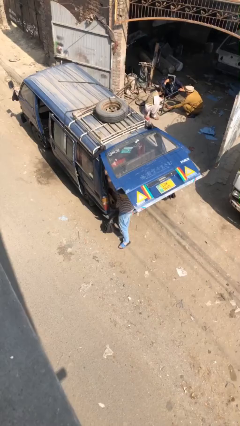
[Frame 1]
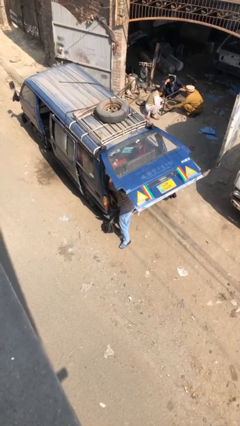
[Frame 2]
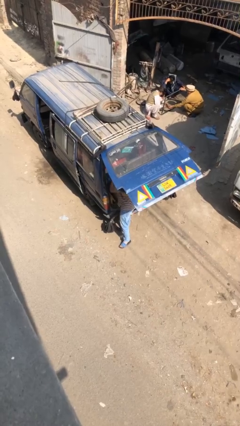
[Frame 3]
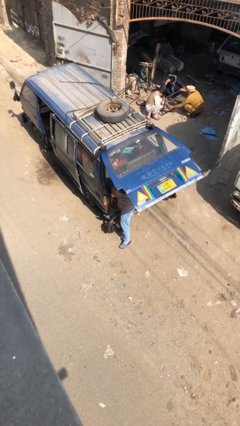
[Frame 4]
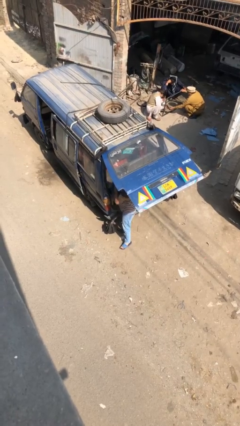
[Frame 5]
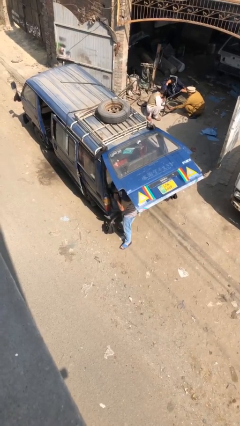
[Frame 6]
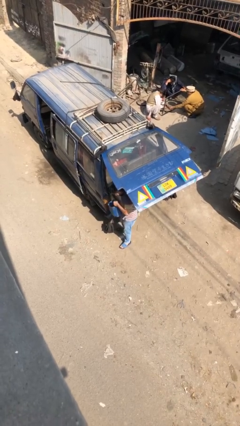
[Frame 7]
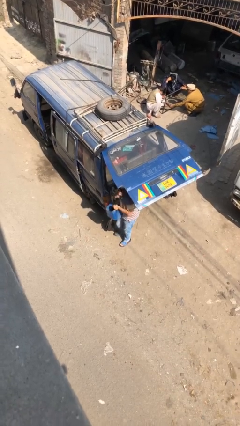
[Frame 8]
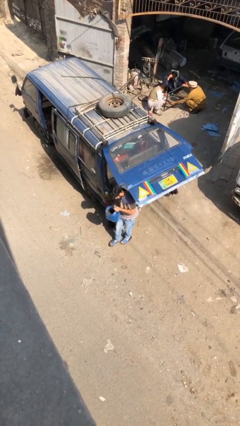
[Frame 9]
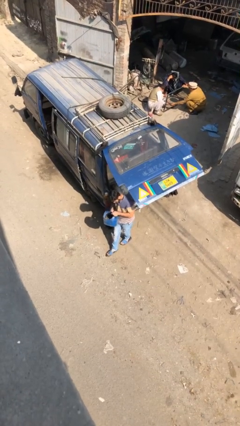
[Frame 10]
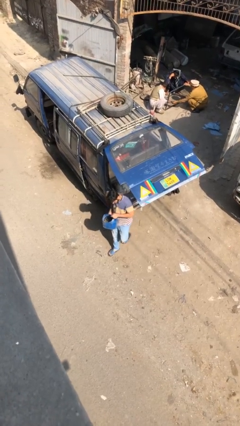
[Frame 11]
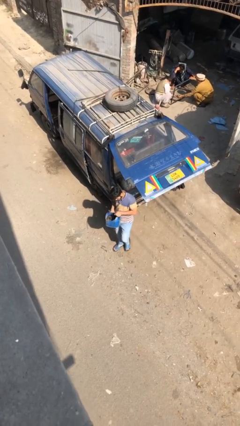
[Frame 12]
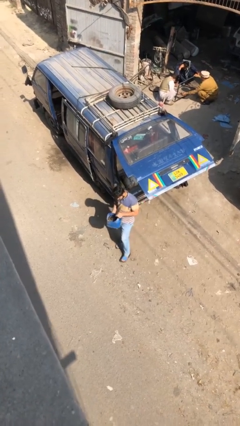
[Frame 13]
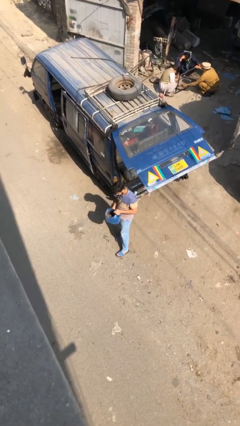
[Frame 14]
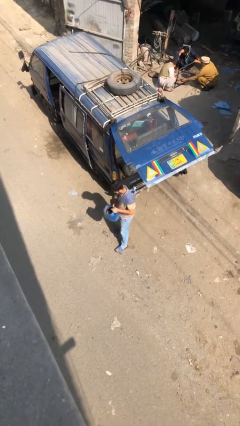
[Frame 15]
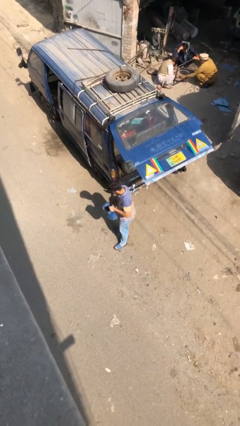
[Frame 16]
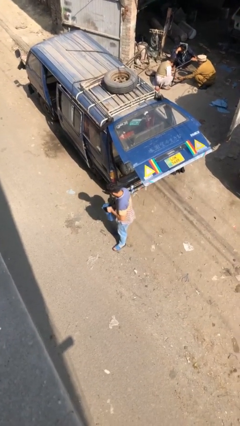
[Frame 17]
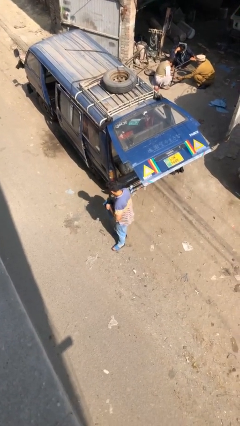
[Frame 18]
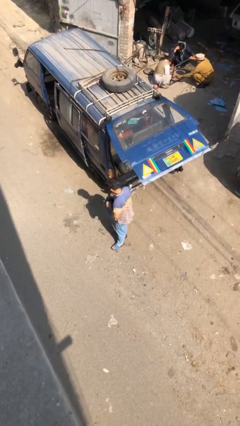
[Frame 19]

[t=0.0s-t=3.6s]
person unloads car

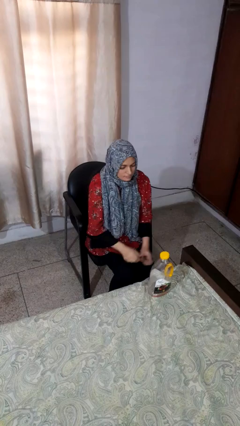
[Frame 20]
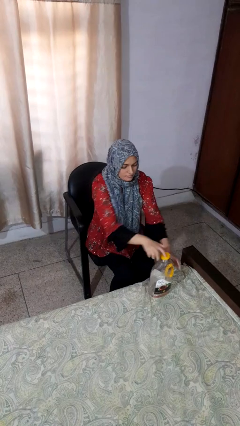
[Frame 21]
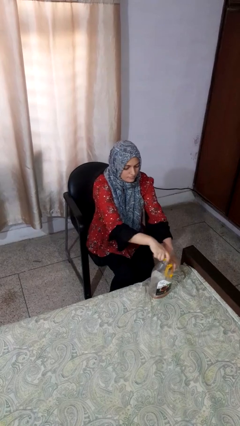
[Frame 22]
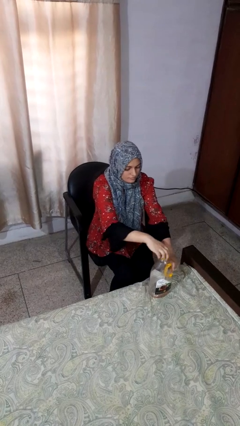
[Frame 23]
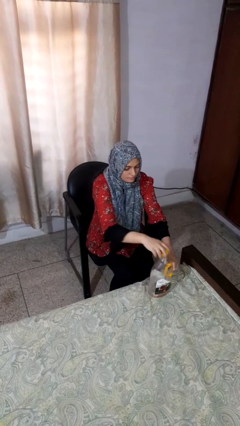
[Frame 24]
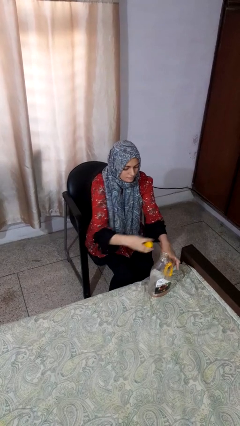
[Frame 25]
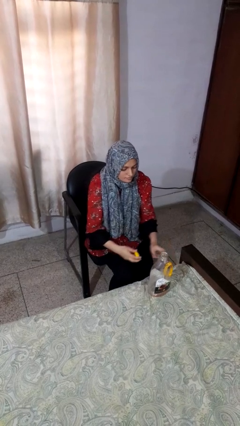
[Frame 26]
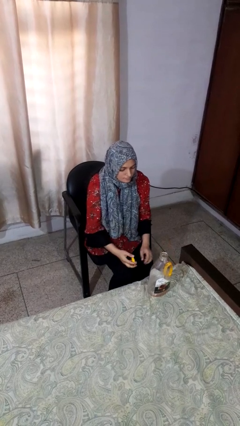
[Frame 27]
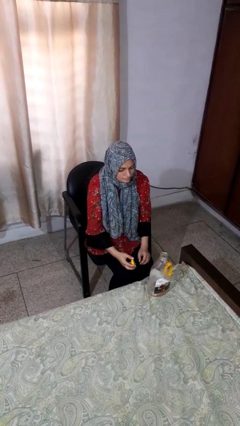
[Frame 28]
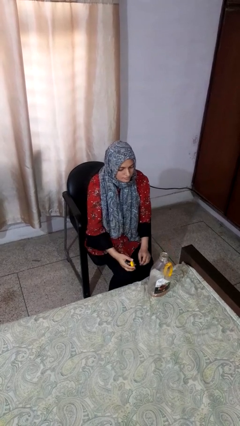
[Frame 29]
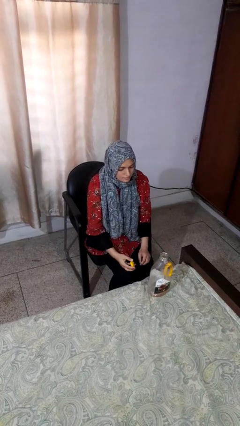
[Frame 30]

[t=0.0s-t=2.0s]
person unscrews lid from bottle

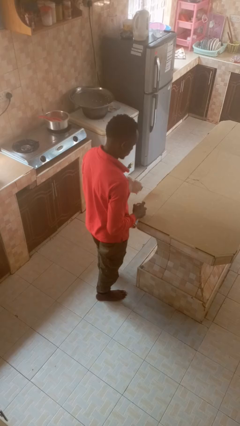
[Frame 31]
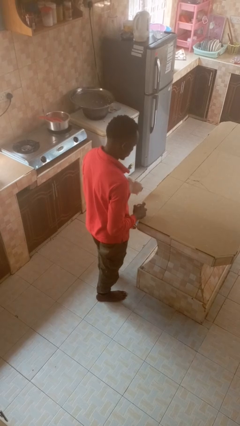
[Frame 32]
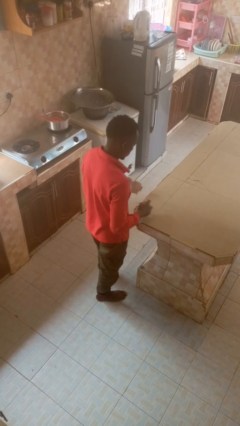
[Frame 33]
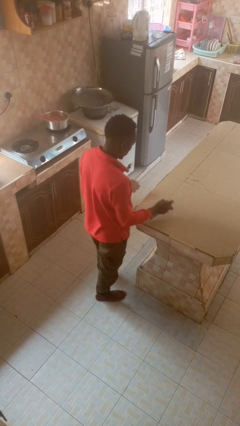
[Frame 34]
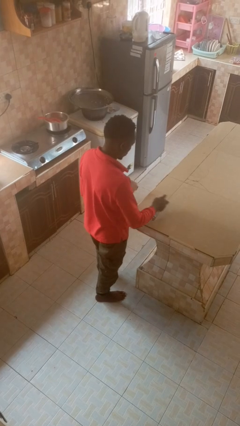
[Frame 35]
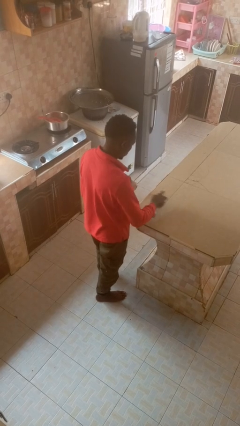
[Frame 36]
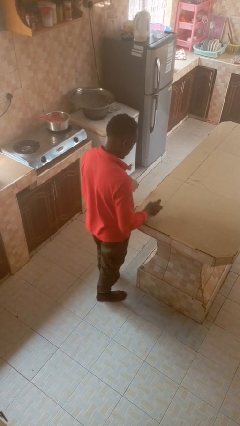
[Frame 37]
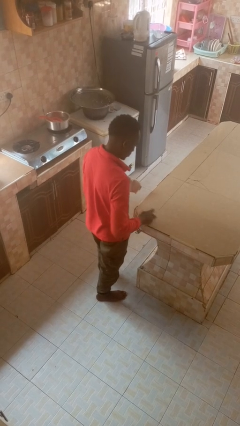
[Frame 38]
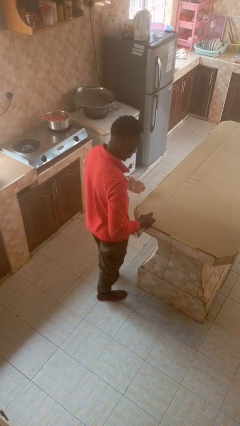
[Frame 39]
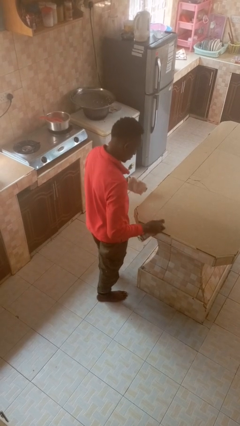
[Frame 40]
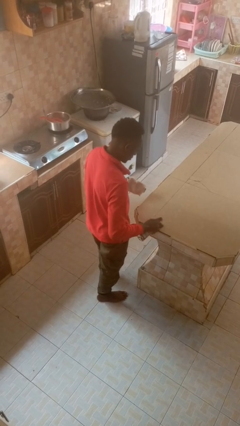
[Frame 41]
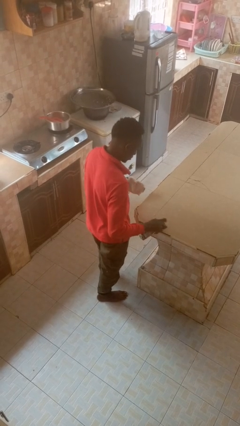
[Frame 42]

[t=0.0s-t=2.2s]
person sprays from bottle

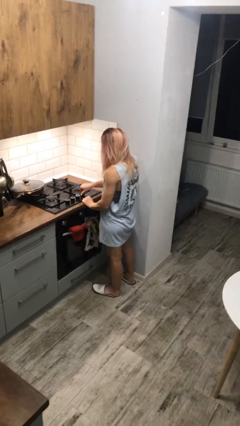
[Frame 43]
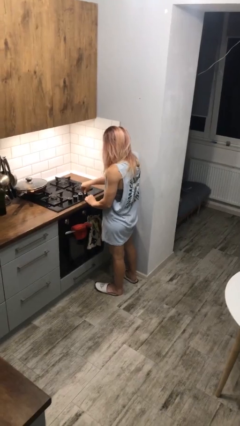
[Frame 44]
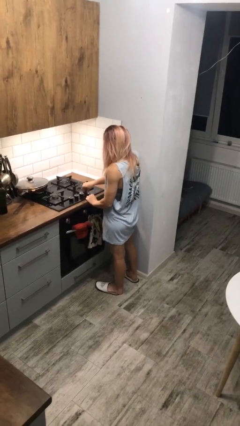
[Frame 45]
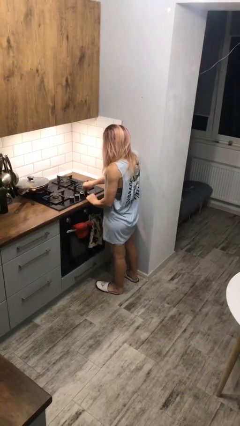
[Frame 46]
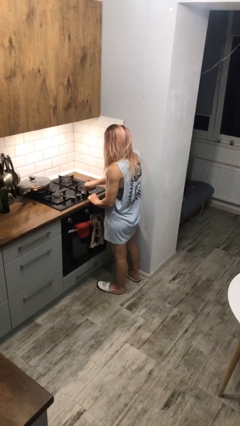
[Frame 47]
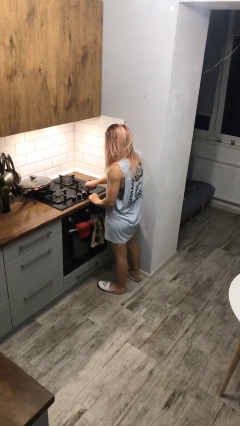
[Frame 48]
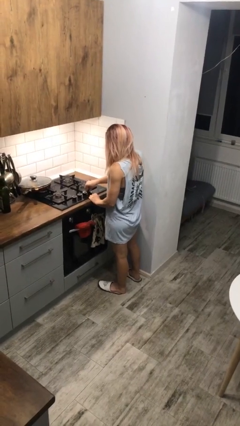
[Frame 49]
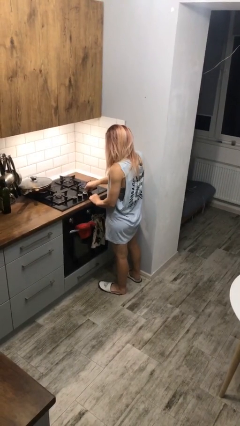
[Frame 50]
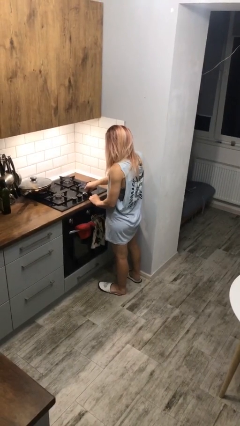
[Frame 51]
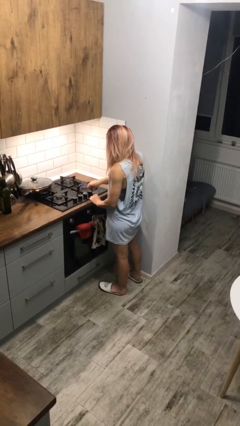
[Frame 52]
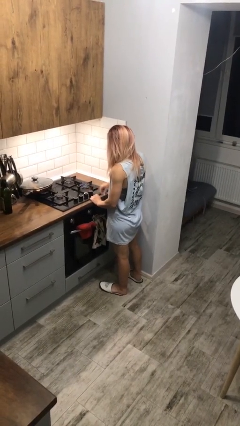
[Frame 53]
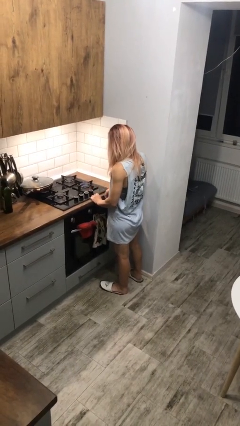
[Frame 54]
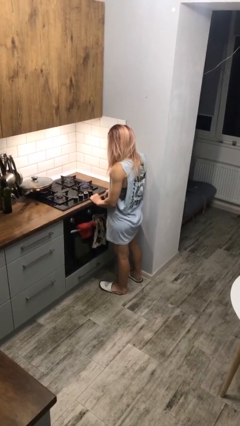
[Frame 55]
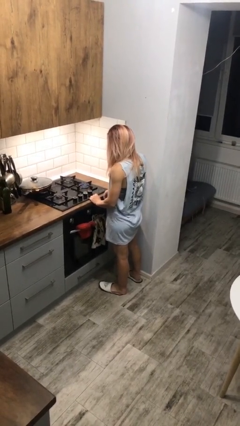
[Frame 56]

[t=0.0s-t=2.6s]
person turns on stovetop

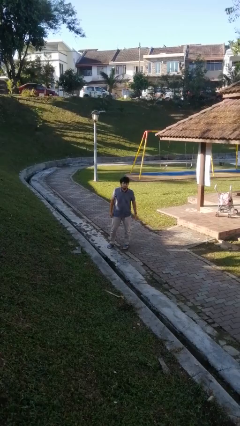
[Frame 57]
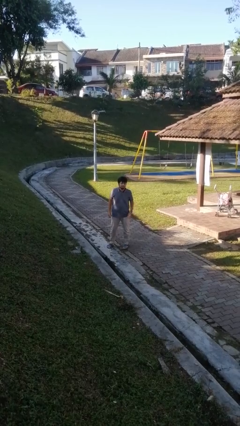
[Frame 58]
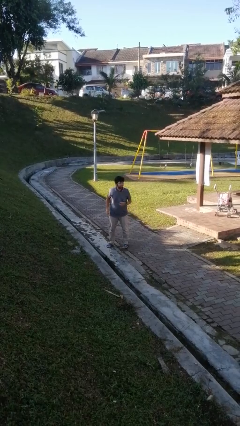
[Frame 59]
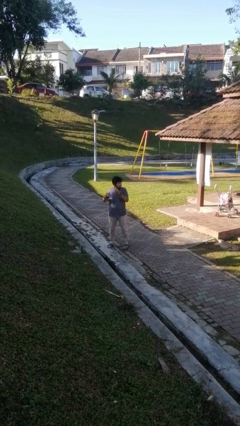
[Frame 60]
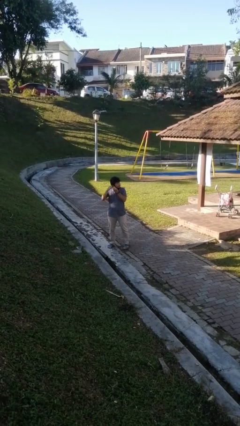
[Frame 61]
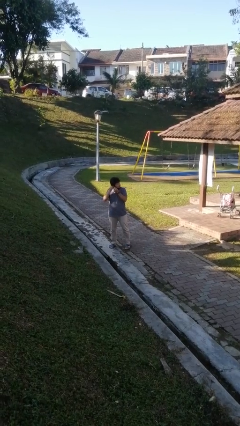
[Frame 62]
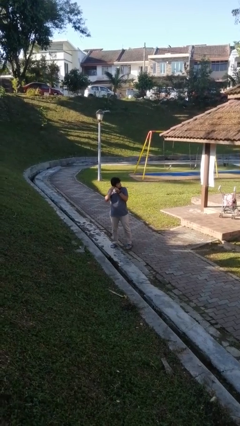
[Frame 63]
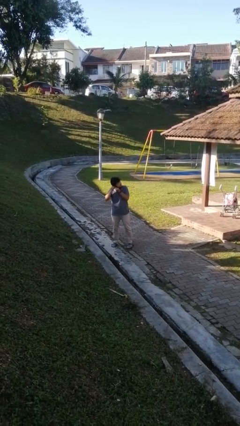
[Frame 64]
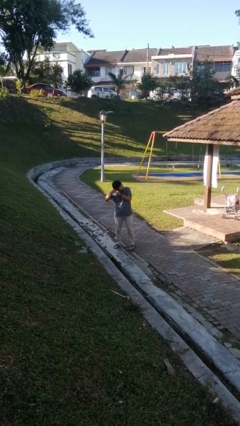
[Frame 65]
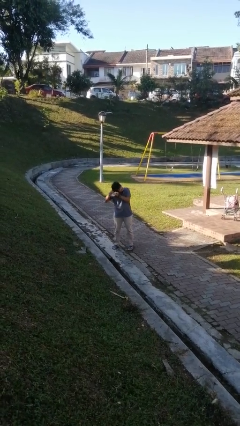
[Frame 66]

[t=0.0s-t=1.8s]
person takes off earrings

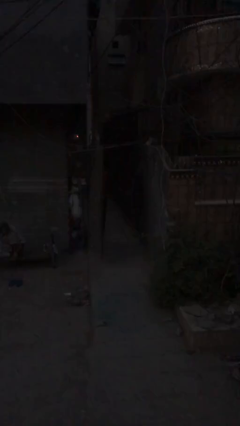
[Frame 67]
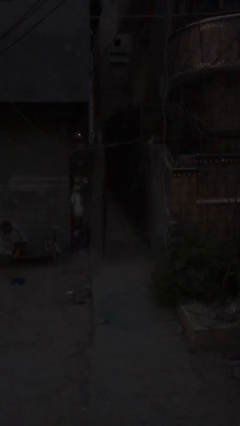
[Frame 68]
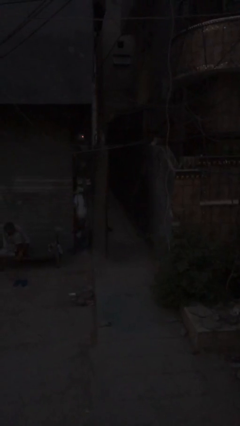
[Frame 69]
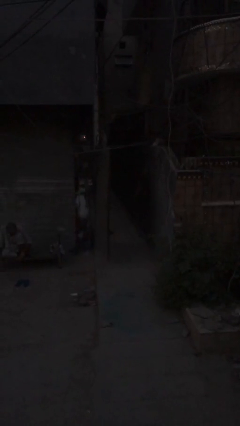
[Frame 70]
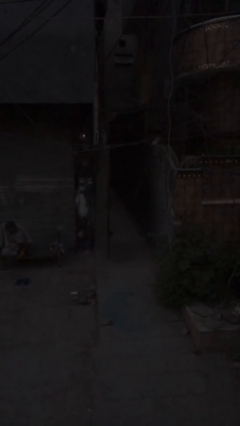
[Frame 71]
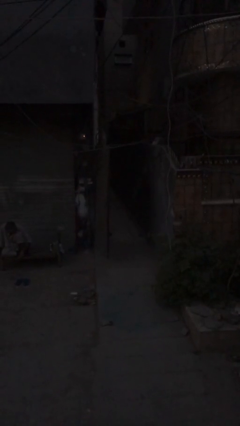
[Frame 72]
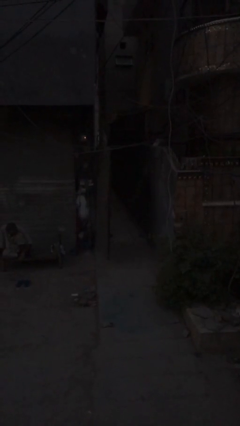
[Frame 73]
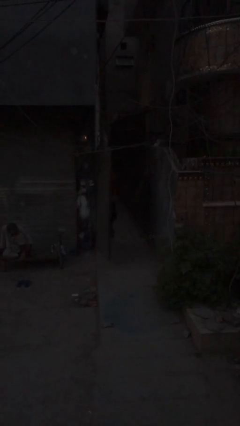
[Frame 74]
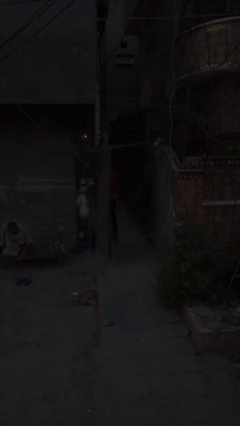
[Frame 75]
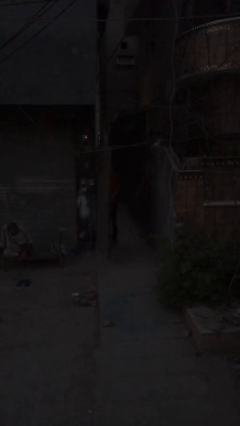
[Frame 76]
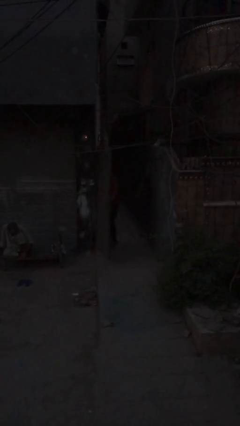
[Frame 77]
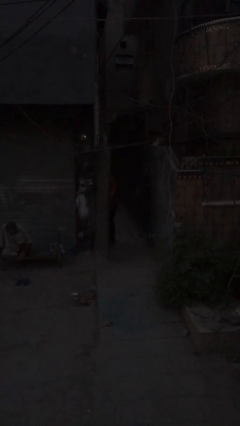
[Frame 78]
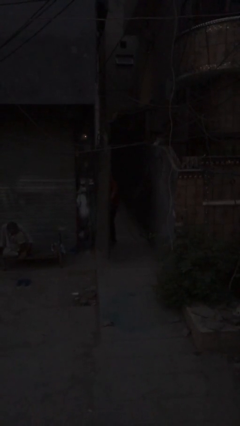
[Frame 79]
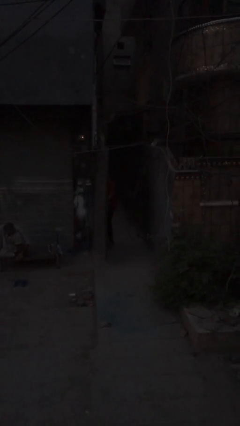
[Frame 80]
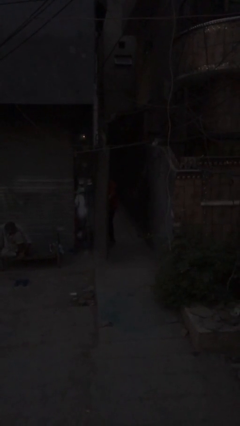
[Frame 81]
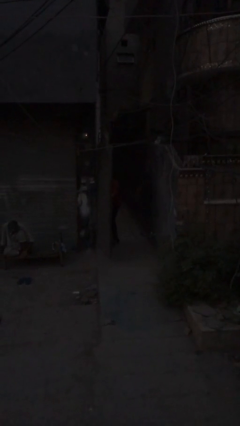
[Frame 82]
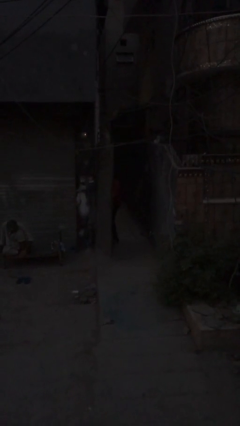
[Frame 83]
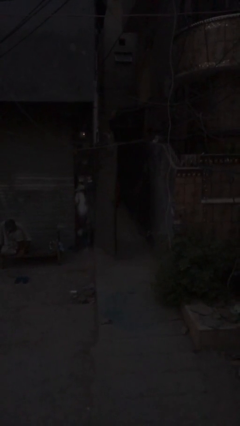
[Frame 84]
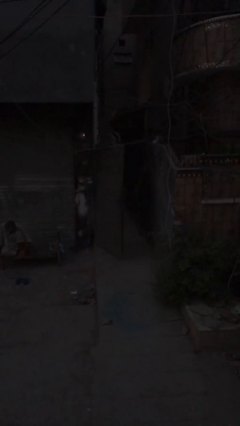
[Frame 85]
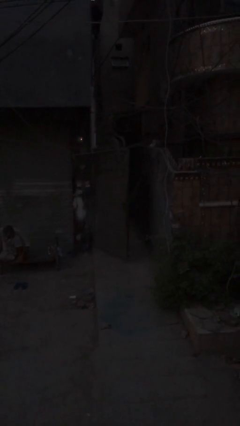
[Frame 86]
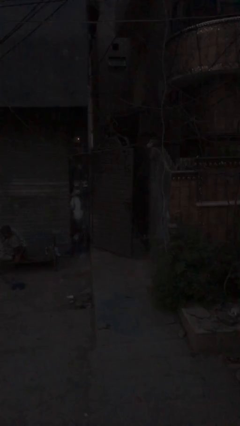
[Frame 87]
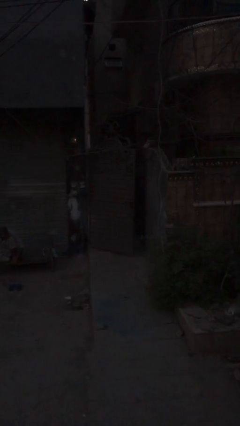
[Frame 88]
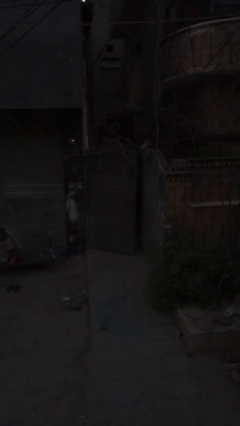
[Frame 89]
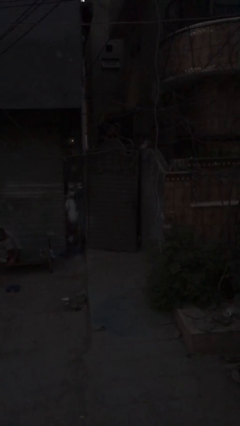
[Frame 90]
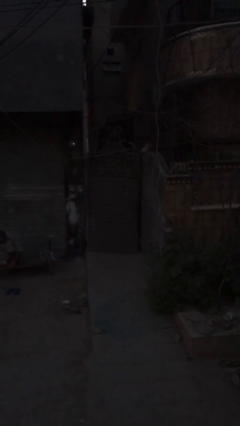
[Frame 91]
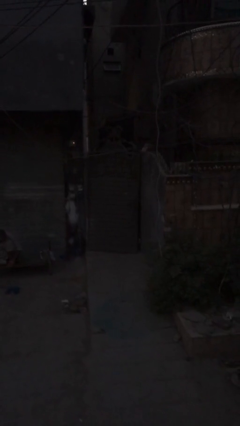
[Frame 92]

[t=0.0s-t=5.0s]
person closes facility door
